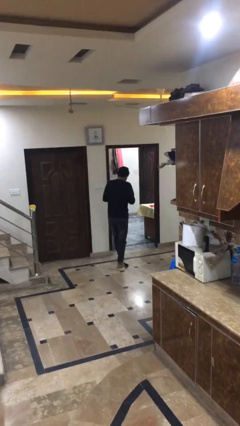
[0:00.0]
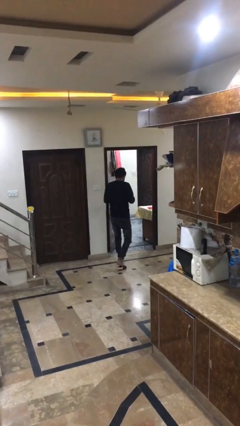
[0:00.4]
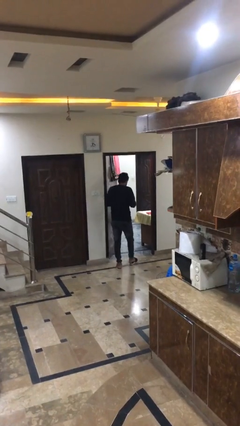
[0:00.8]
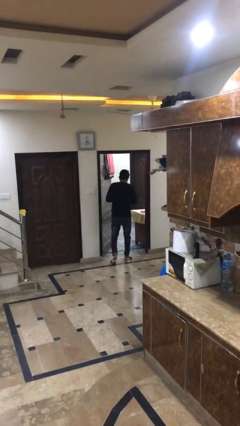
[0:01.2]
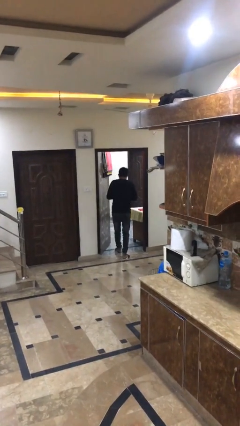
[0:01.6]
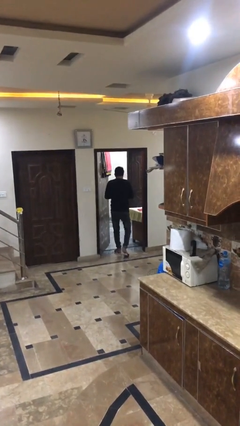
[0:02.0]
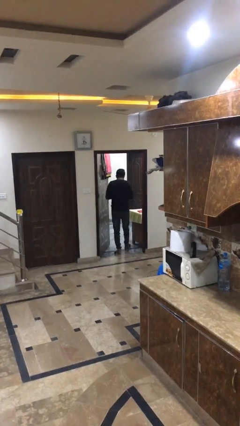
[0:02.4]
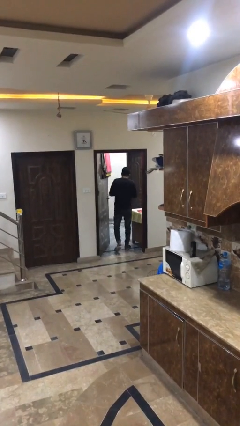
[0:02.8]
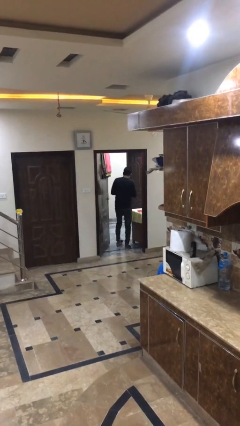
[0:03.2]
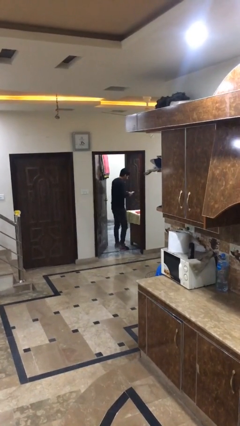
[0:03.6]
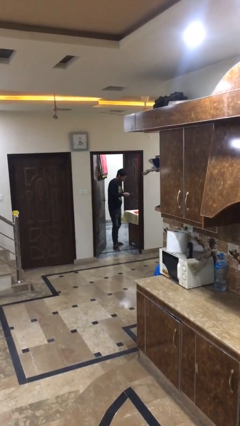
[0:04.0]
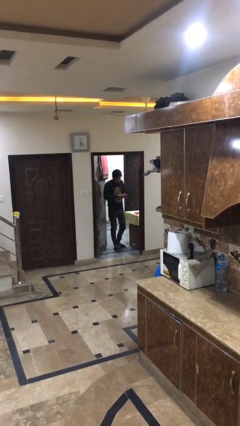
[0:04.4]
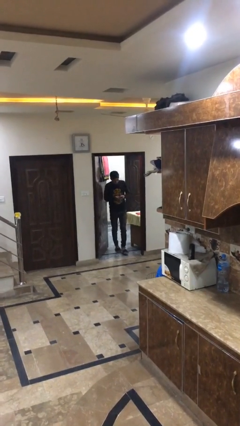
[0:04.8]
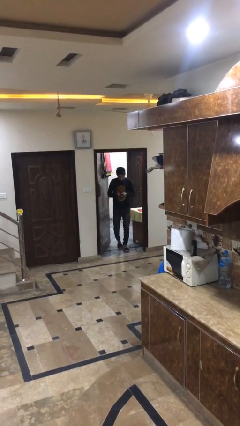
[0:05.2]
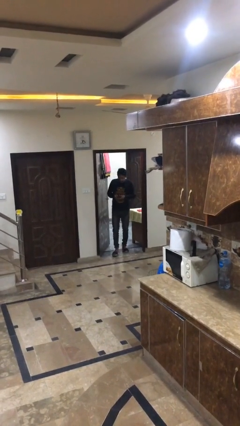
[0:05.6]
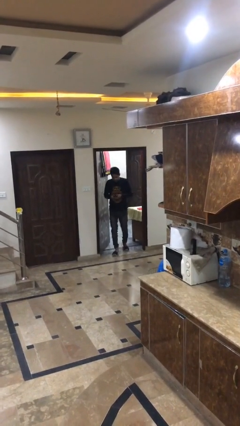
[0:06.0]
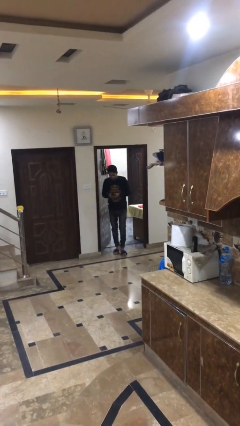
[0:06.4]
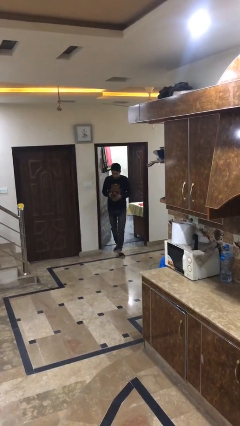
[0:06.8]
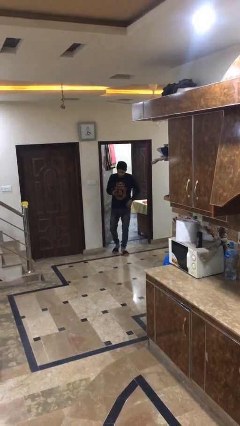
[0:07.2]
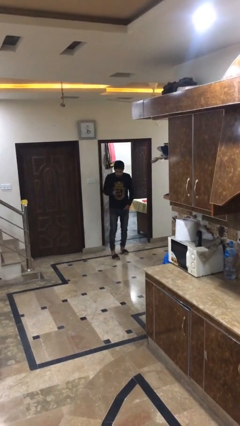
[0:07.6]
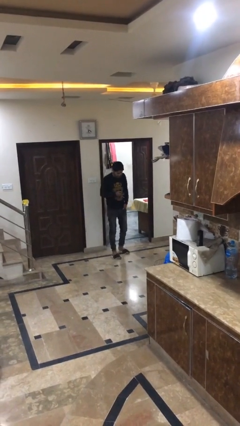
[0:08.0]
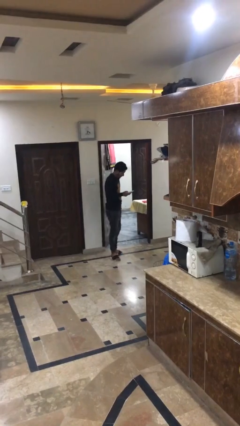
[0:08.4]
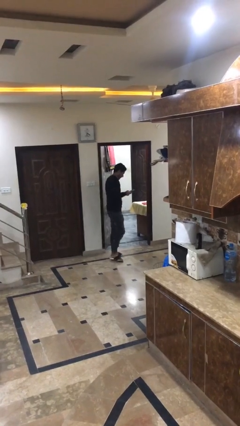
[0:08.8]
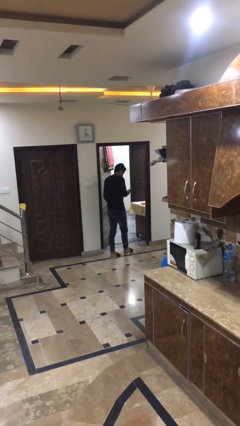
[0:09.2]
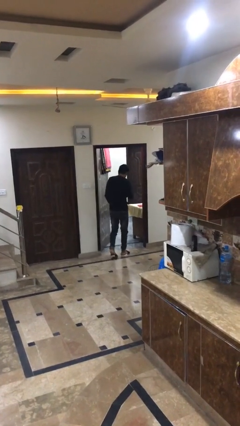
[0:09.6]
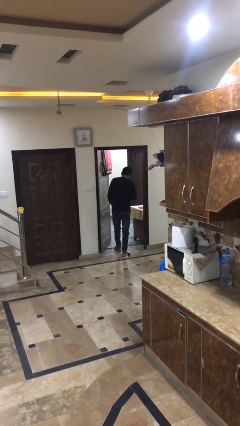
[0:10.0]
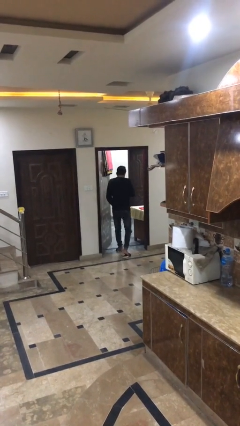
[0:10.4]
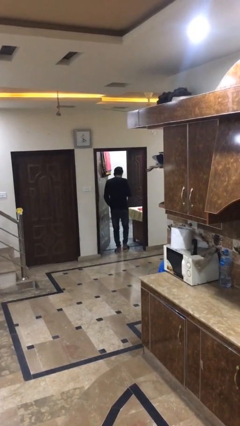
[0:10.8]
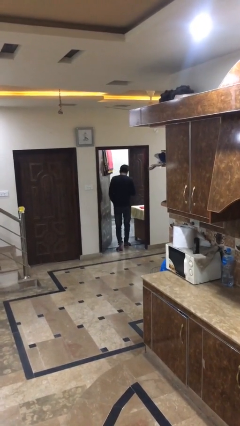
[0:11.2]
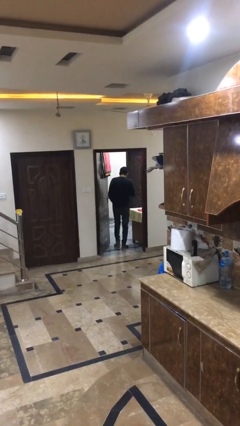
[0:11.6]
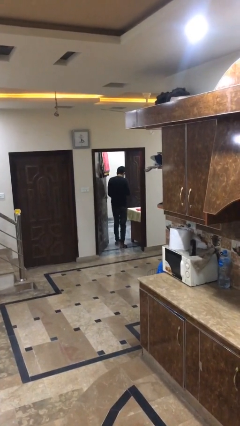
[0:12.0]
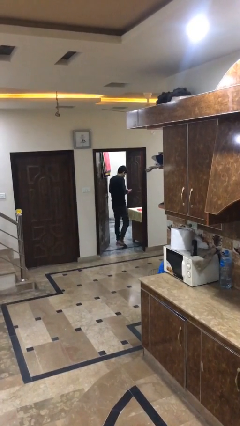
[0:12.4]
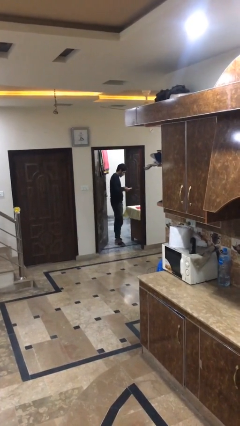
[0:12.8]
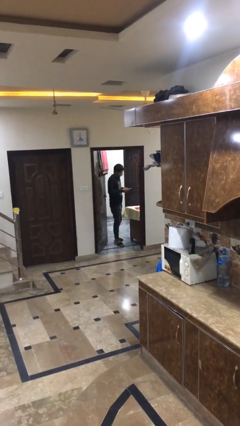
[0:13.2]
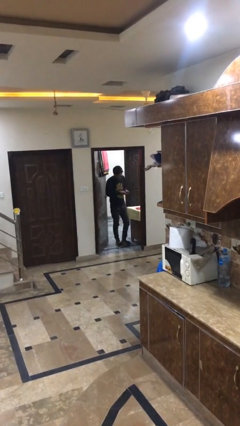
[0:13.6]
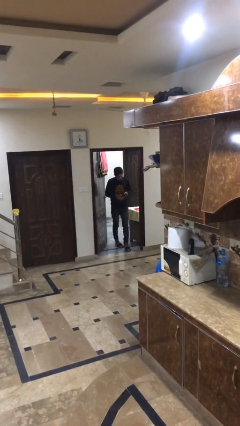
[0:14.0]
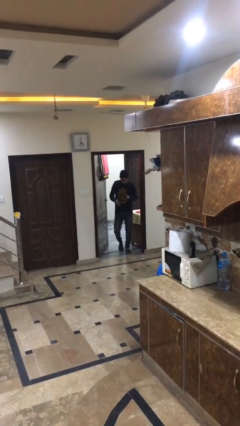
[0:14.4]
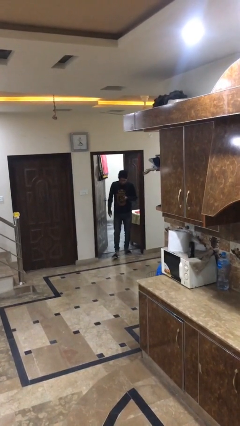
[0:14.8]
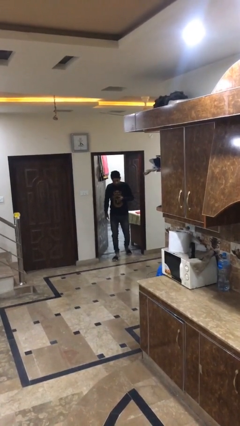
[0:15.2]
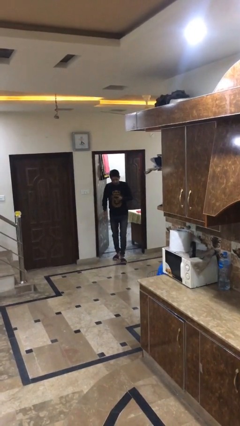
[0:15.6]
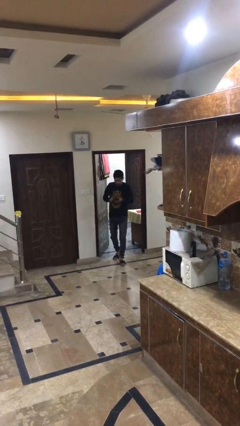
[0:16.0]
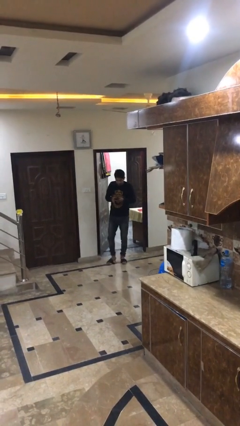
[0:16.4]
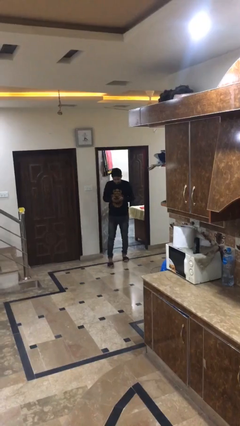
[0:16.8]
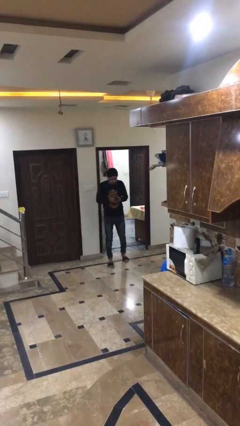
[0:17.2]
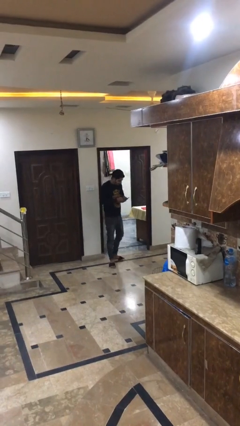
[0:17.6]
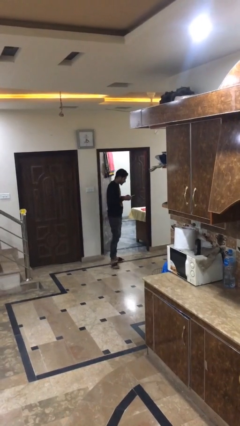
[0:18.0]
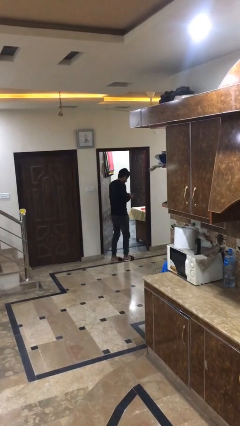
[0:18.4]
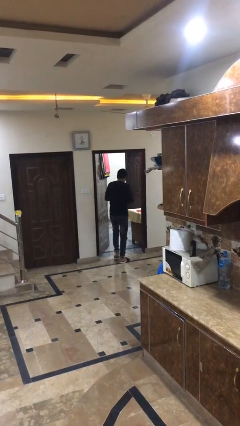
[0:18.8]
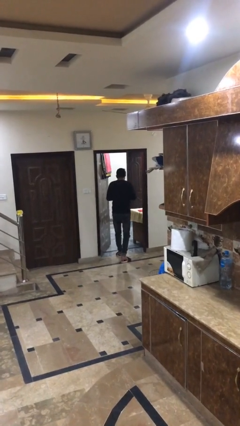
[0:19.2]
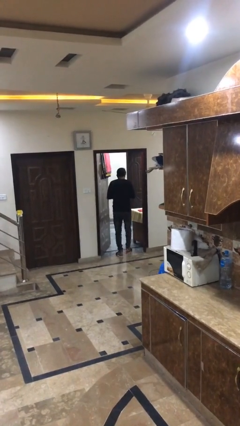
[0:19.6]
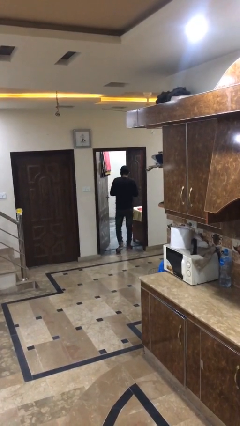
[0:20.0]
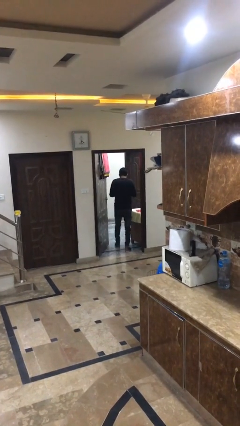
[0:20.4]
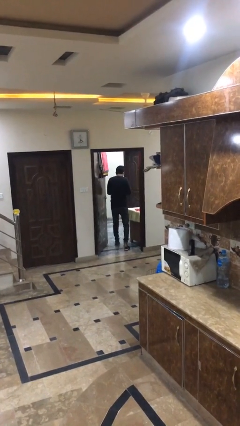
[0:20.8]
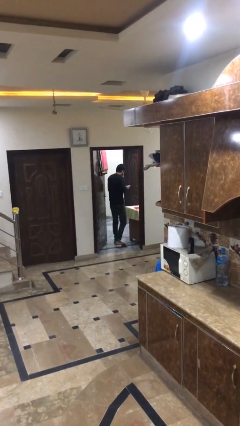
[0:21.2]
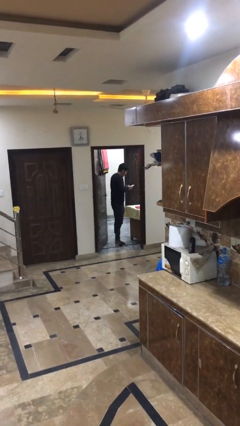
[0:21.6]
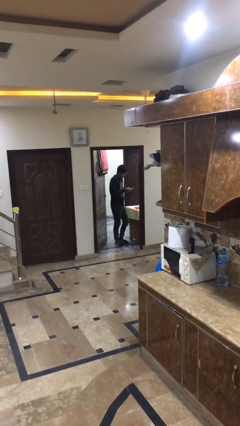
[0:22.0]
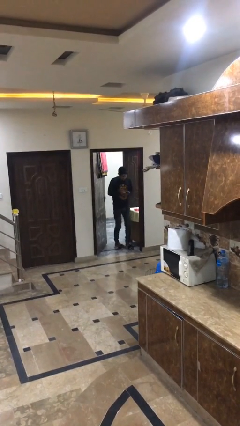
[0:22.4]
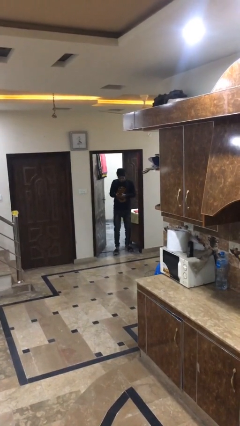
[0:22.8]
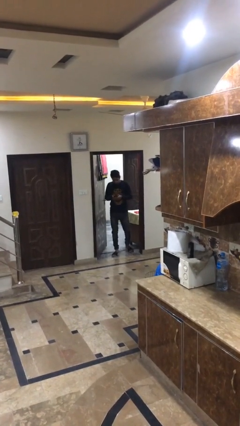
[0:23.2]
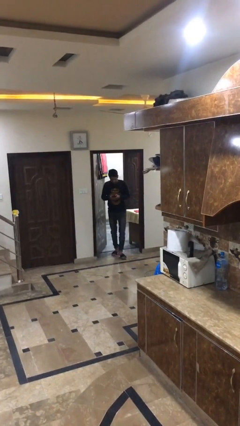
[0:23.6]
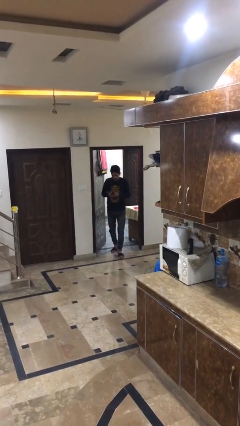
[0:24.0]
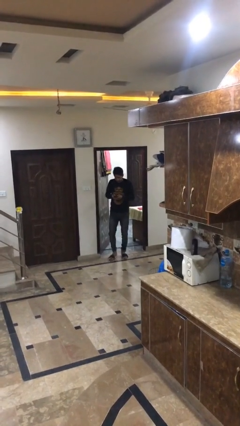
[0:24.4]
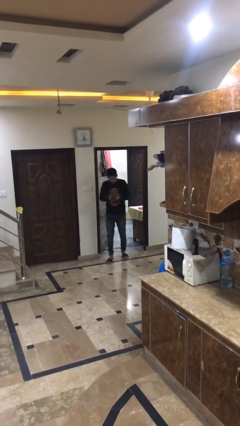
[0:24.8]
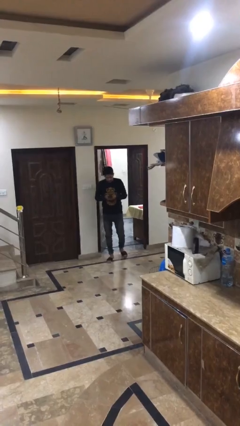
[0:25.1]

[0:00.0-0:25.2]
person texts on phone

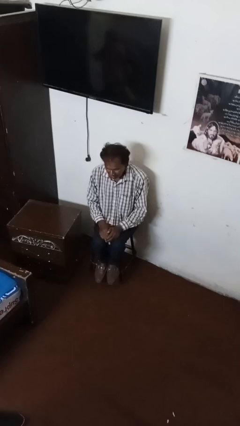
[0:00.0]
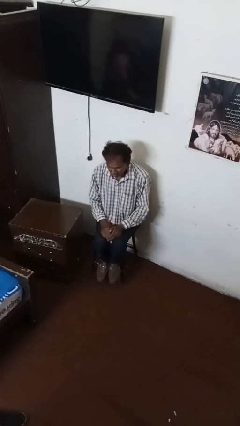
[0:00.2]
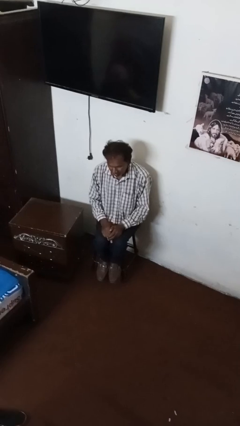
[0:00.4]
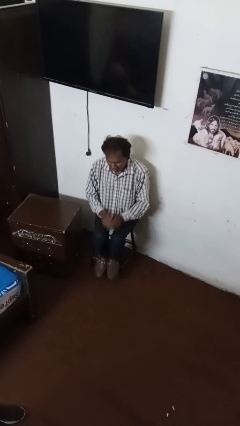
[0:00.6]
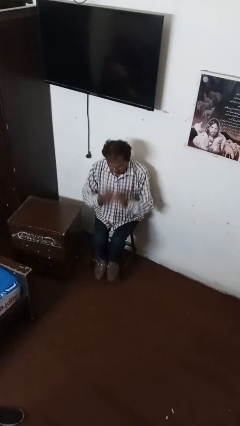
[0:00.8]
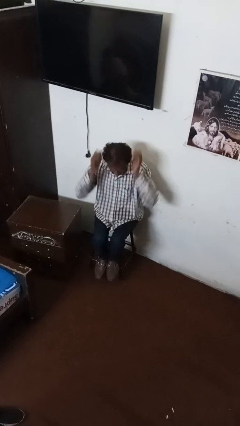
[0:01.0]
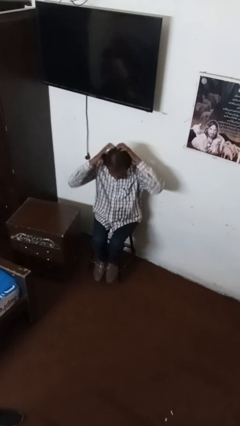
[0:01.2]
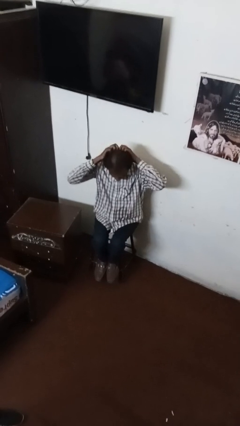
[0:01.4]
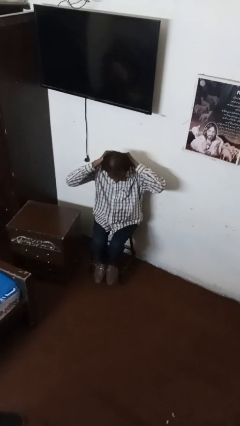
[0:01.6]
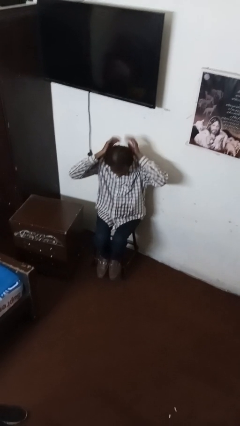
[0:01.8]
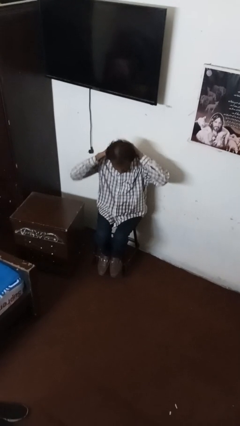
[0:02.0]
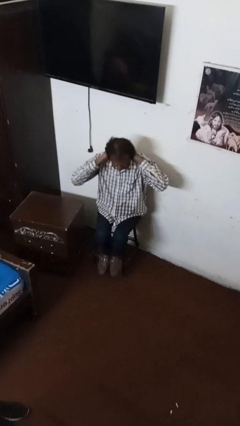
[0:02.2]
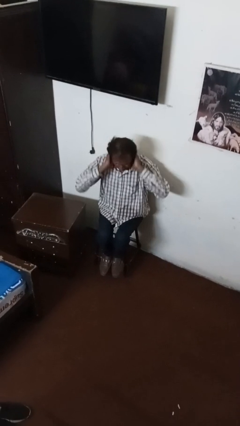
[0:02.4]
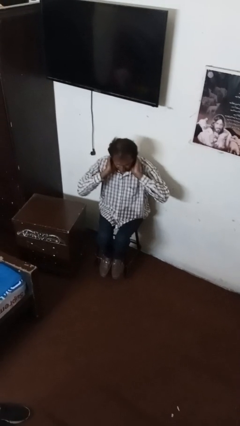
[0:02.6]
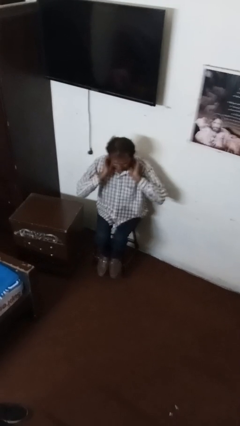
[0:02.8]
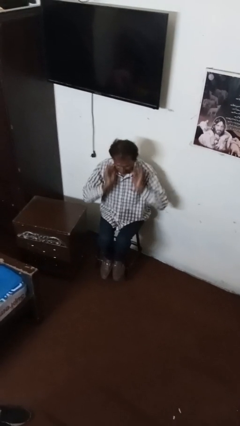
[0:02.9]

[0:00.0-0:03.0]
person strokes hair

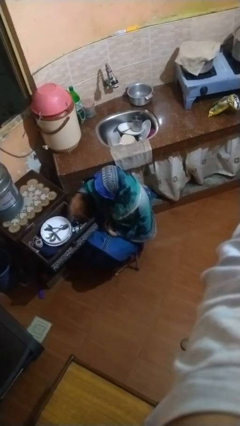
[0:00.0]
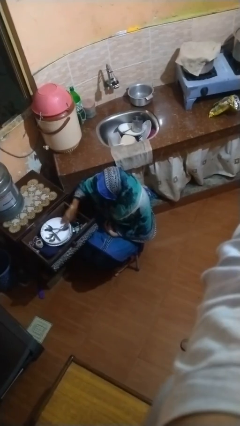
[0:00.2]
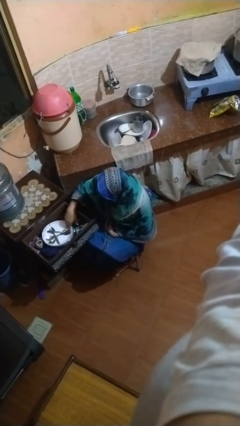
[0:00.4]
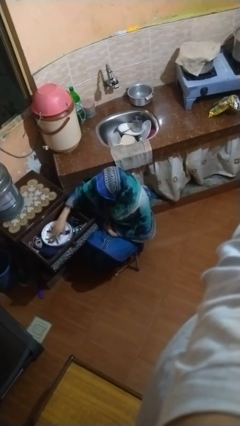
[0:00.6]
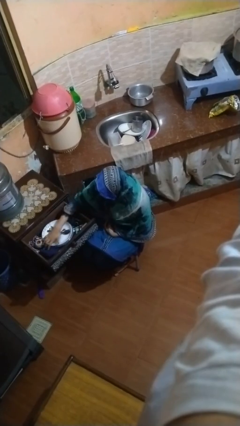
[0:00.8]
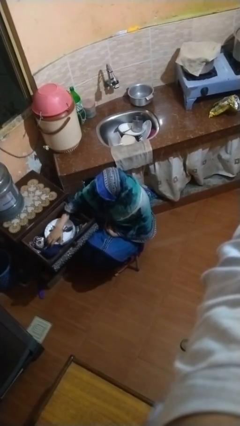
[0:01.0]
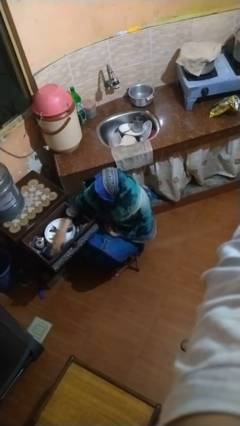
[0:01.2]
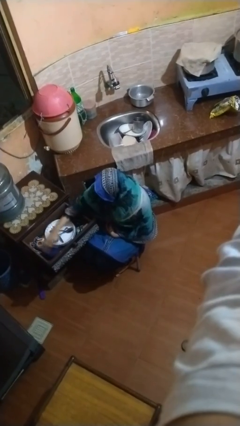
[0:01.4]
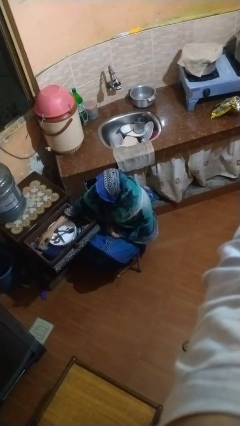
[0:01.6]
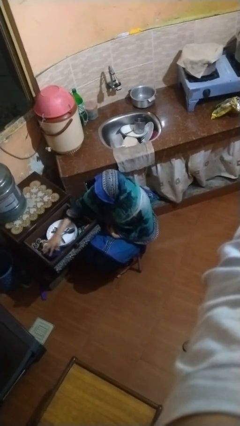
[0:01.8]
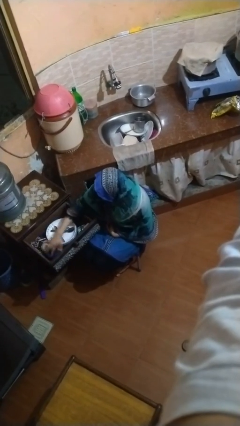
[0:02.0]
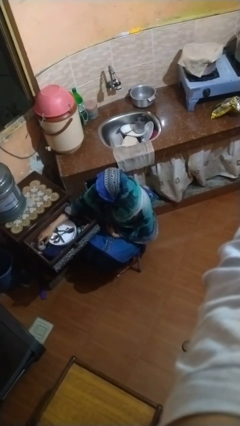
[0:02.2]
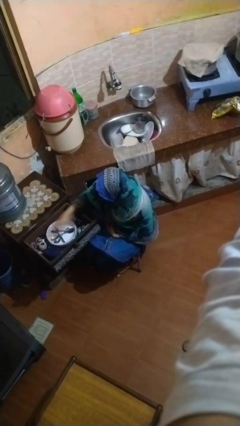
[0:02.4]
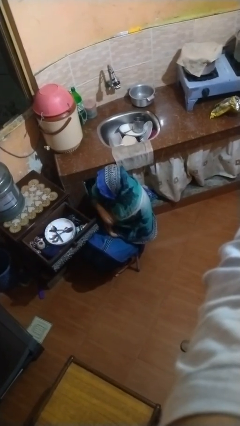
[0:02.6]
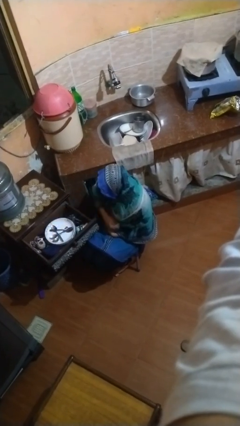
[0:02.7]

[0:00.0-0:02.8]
person searches in kitchen drawer
